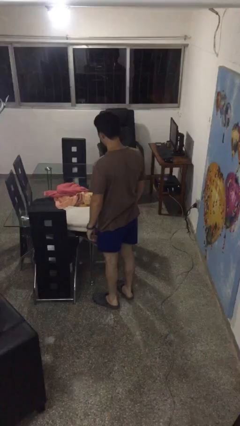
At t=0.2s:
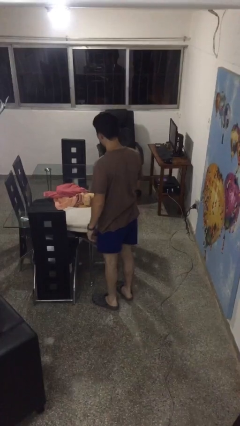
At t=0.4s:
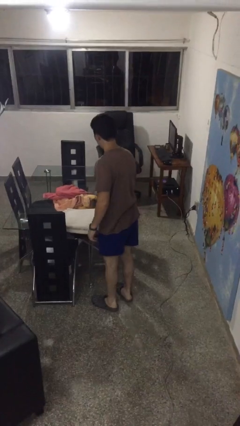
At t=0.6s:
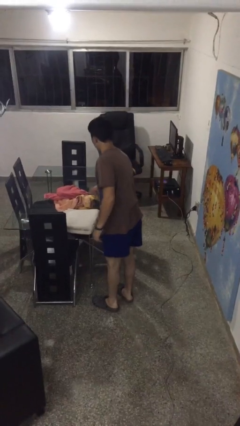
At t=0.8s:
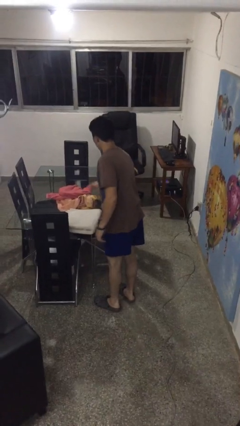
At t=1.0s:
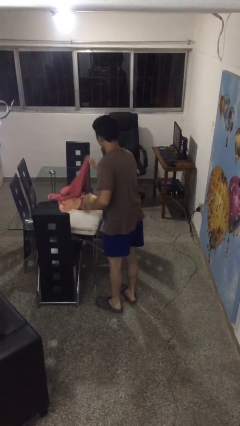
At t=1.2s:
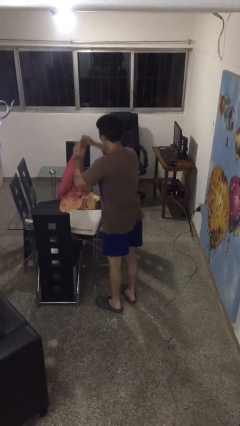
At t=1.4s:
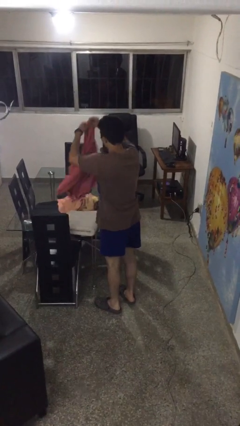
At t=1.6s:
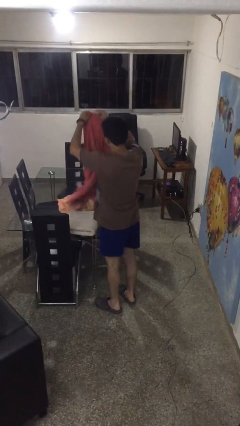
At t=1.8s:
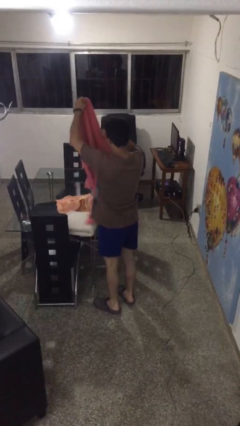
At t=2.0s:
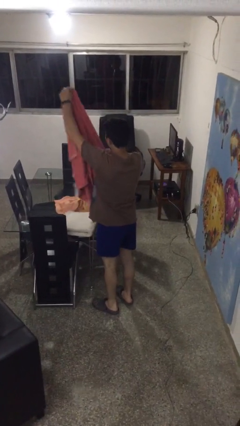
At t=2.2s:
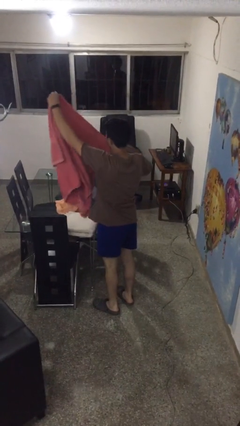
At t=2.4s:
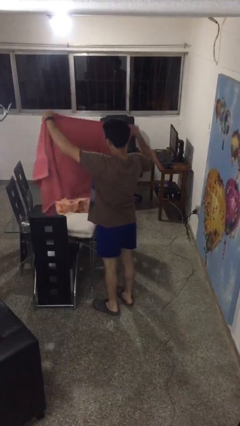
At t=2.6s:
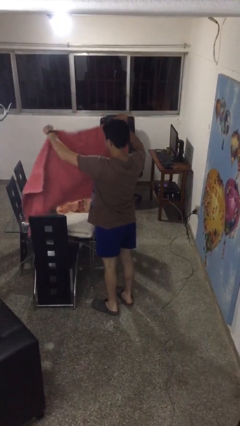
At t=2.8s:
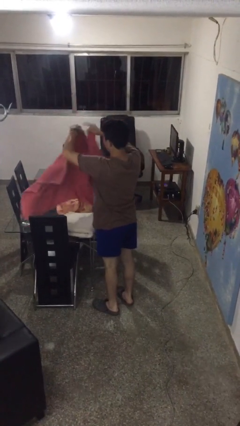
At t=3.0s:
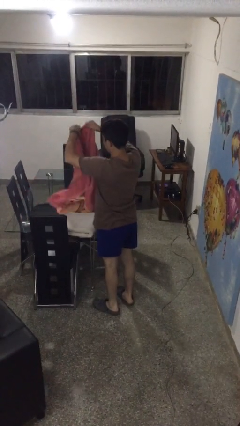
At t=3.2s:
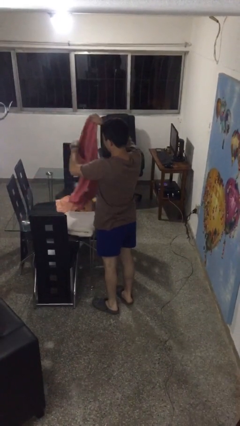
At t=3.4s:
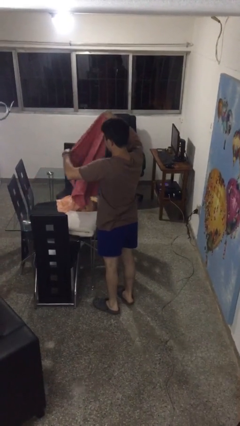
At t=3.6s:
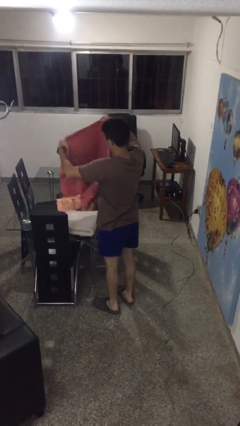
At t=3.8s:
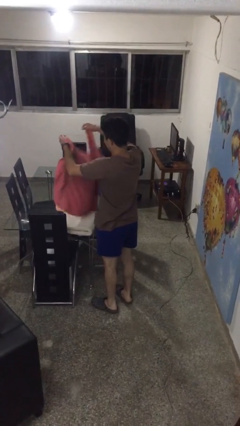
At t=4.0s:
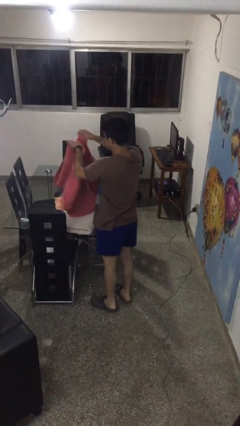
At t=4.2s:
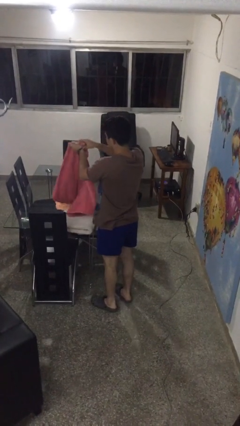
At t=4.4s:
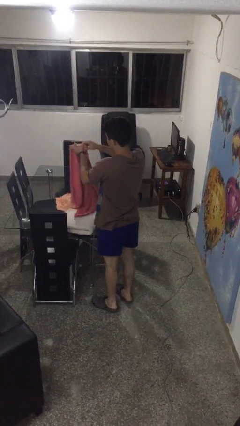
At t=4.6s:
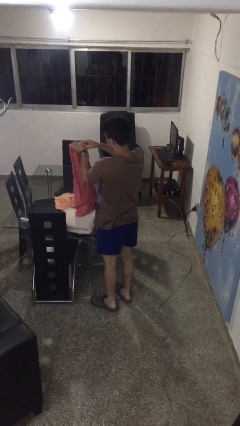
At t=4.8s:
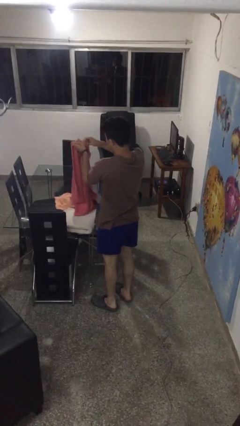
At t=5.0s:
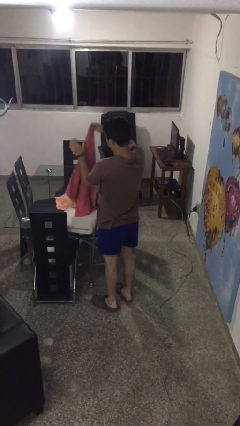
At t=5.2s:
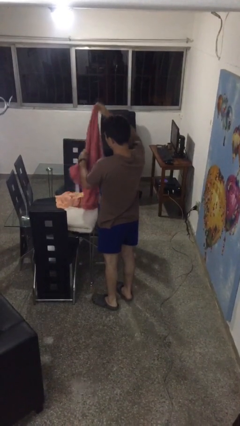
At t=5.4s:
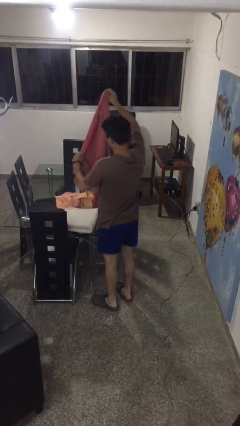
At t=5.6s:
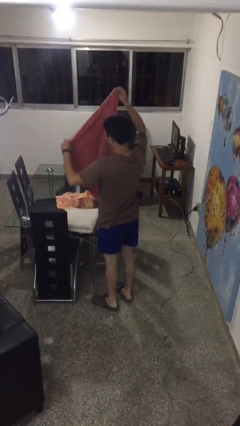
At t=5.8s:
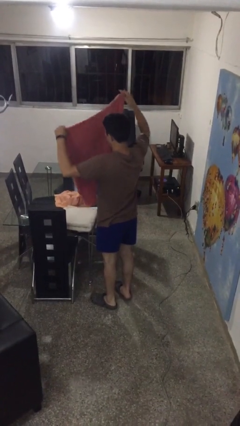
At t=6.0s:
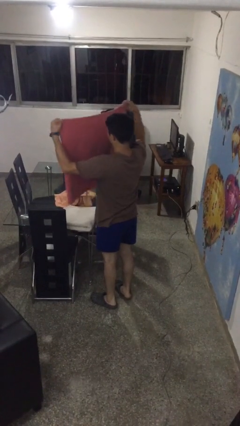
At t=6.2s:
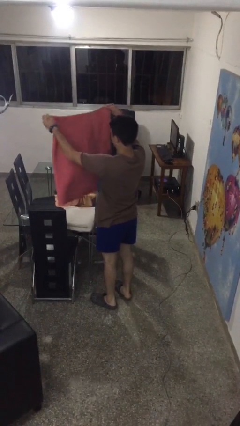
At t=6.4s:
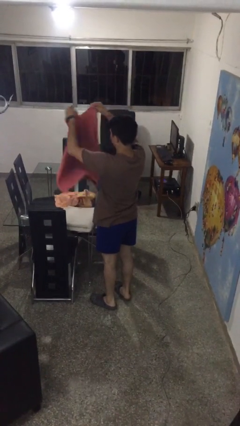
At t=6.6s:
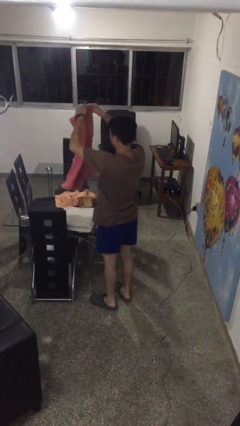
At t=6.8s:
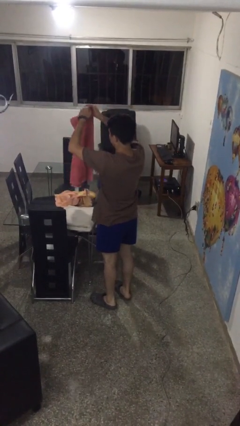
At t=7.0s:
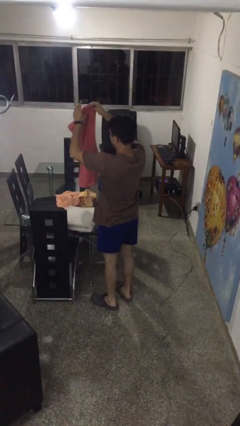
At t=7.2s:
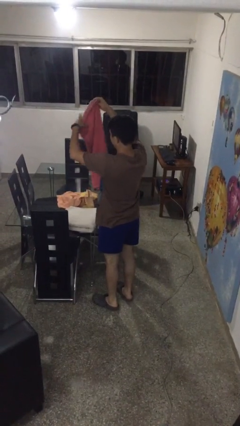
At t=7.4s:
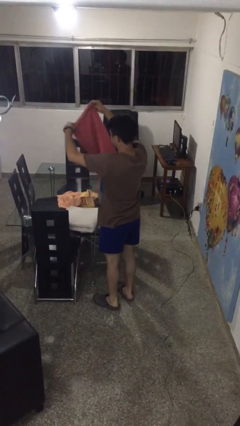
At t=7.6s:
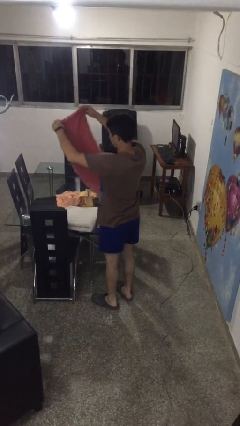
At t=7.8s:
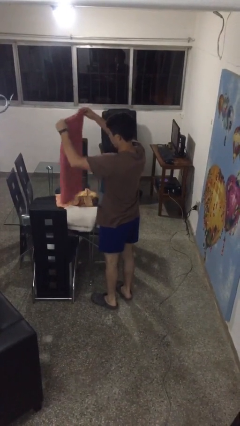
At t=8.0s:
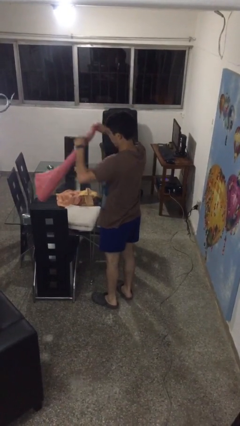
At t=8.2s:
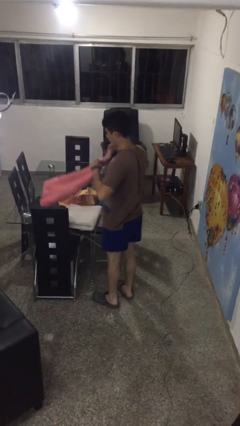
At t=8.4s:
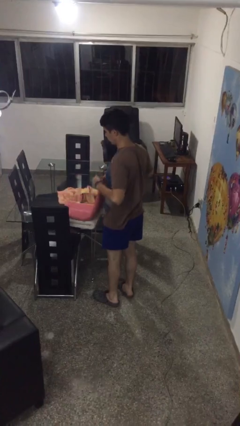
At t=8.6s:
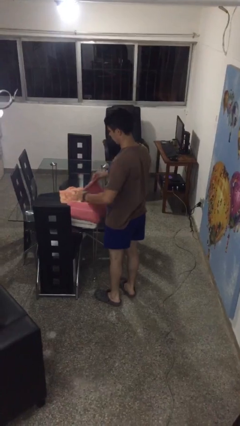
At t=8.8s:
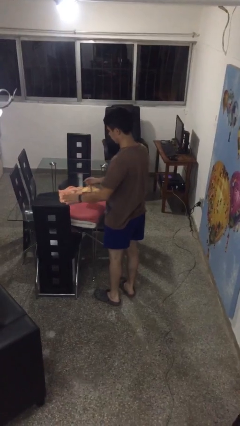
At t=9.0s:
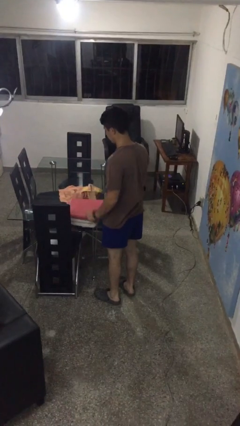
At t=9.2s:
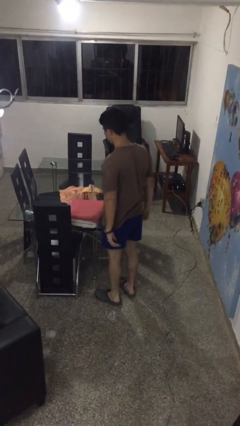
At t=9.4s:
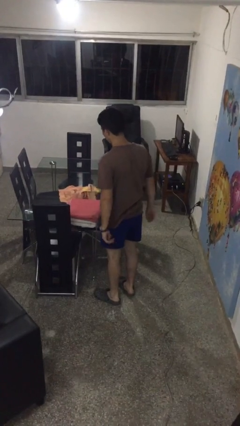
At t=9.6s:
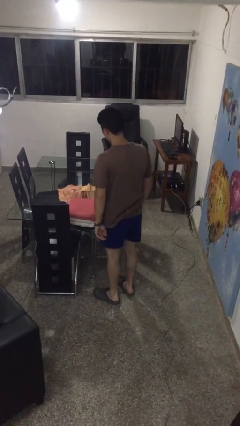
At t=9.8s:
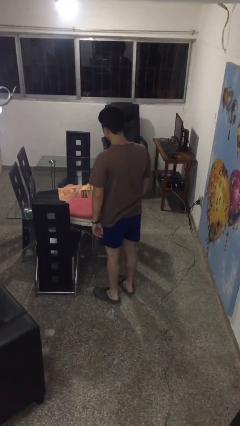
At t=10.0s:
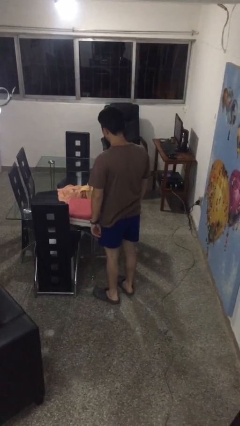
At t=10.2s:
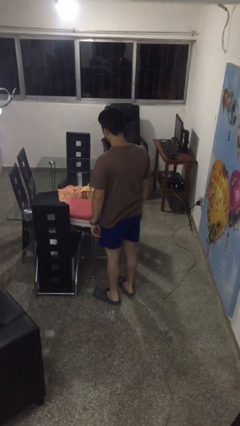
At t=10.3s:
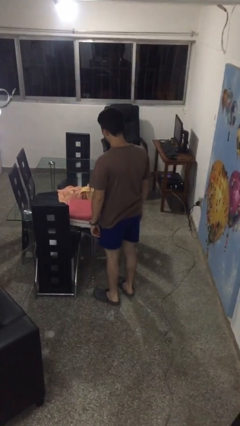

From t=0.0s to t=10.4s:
person folds towel

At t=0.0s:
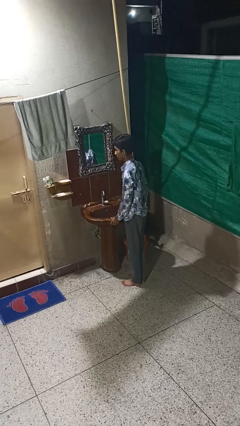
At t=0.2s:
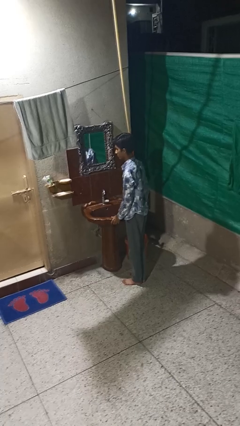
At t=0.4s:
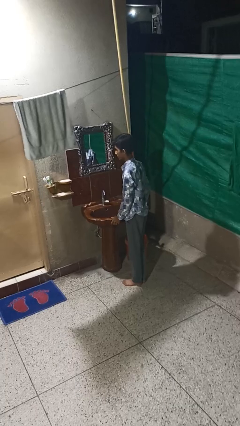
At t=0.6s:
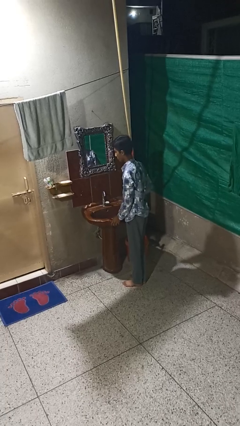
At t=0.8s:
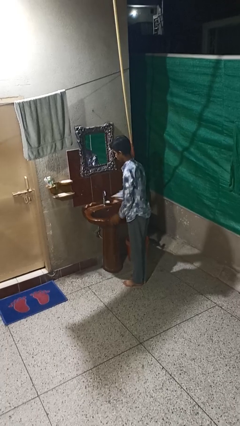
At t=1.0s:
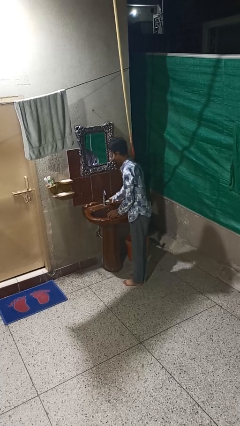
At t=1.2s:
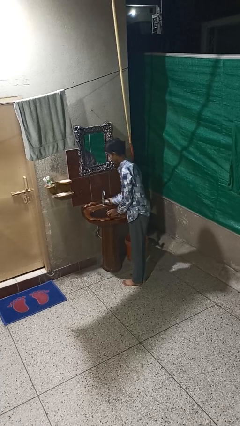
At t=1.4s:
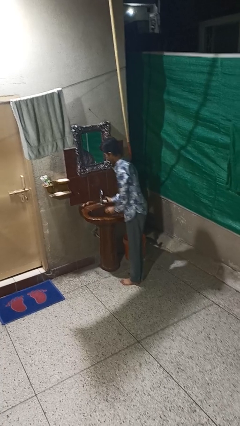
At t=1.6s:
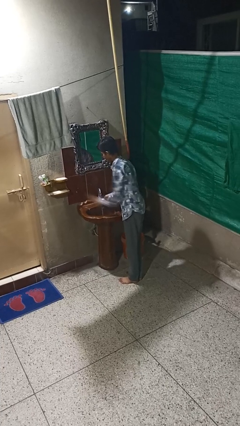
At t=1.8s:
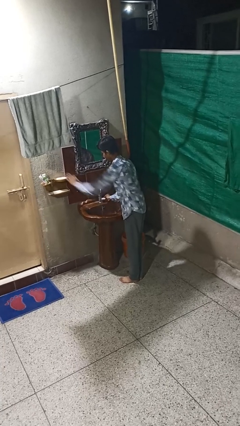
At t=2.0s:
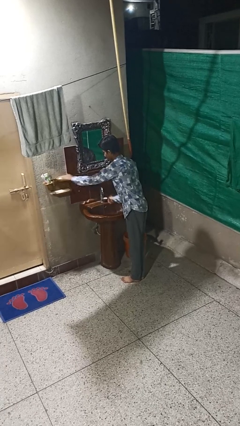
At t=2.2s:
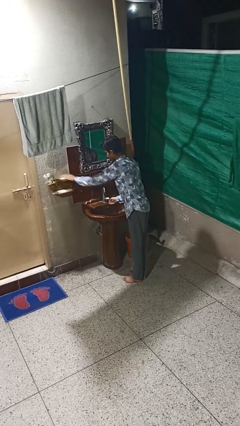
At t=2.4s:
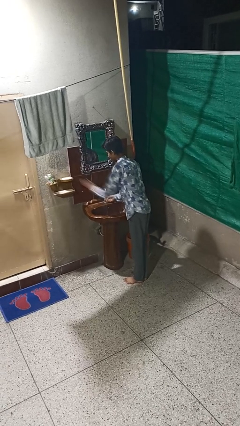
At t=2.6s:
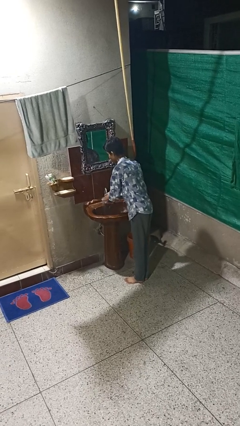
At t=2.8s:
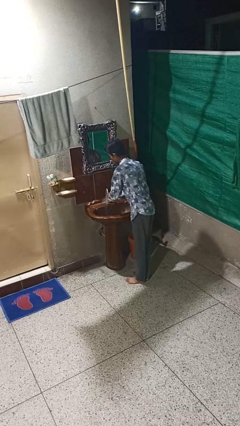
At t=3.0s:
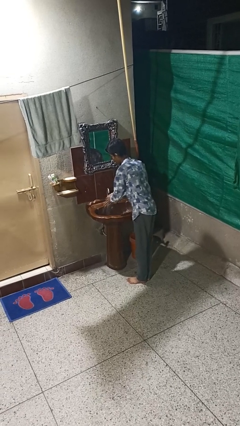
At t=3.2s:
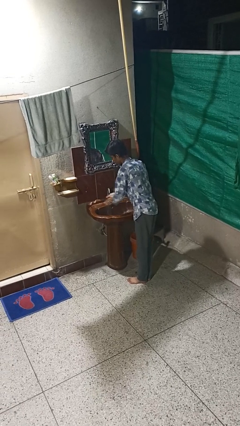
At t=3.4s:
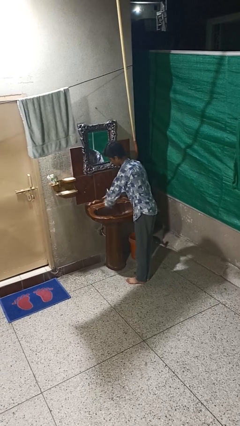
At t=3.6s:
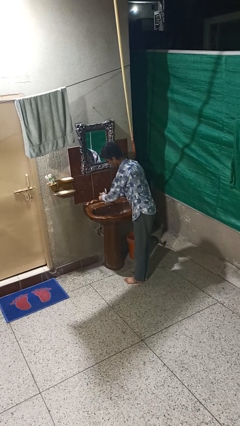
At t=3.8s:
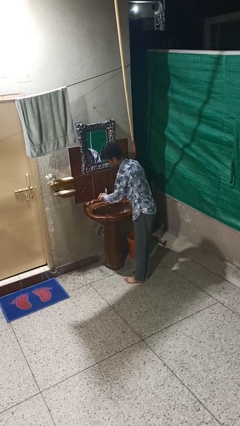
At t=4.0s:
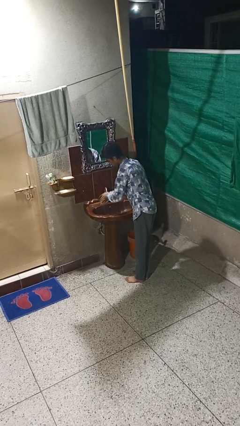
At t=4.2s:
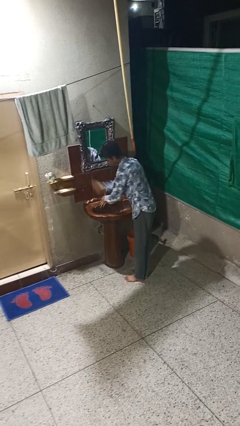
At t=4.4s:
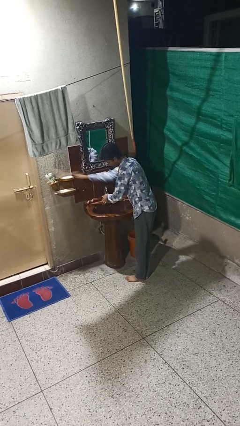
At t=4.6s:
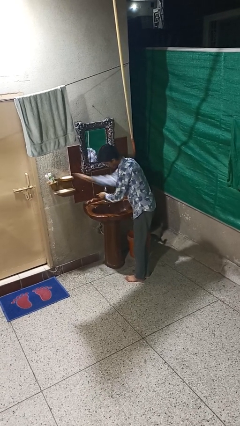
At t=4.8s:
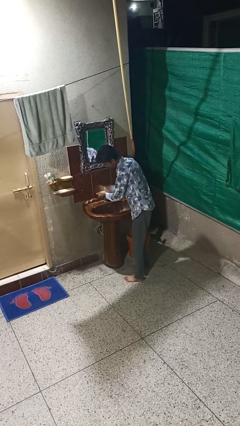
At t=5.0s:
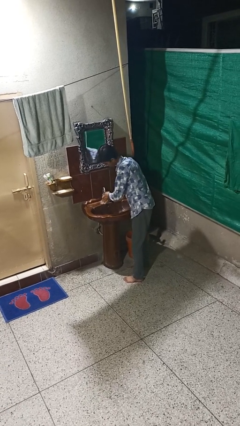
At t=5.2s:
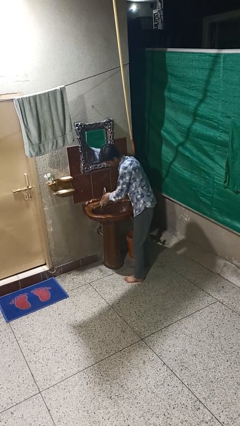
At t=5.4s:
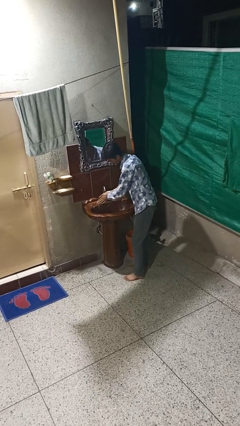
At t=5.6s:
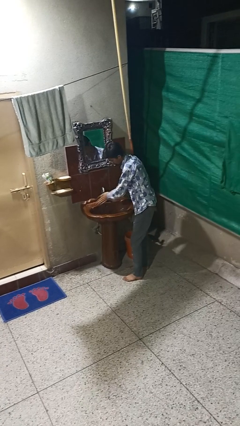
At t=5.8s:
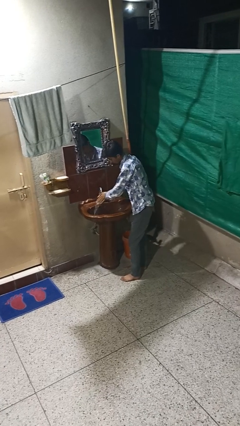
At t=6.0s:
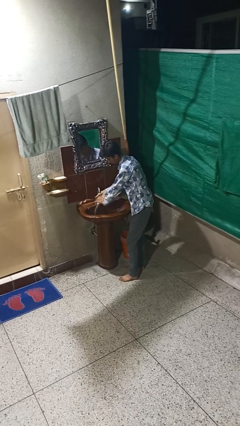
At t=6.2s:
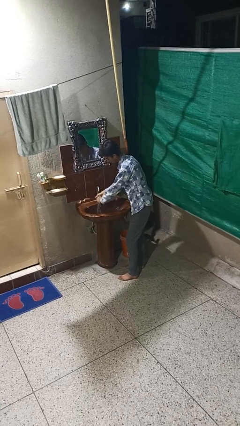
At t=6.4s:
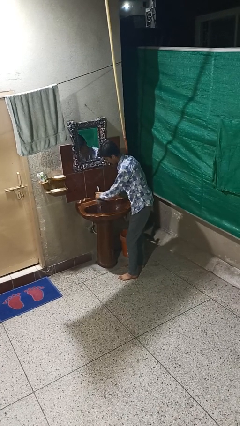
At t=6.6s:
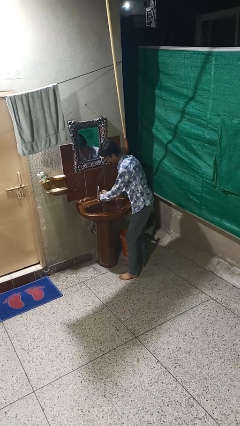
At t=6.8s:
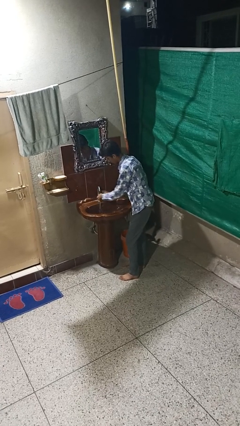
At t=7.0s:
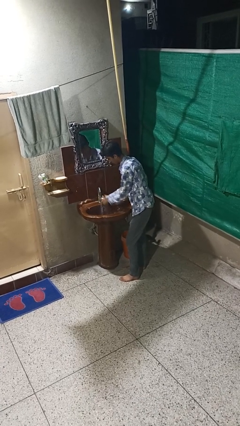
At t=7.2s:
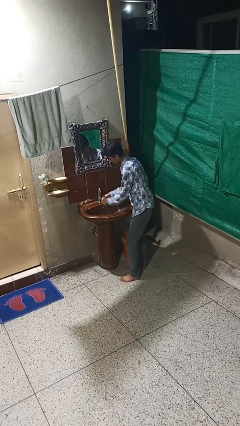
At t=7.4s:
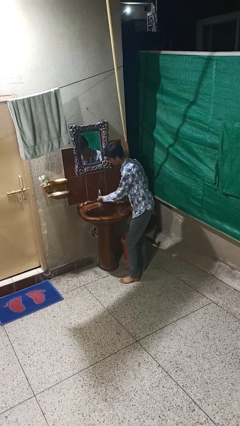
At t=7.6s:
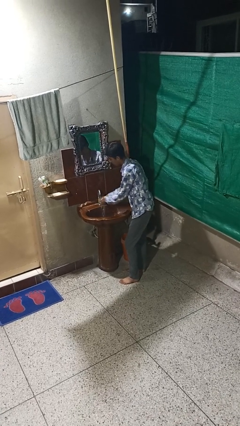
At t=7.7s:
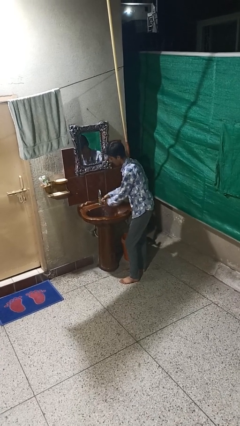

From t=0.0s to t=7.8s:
person washes hands

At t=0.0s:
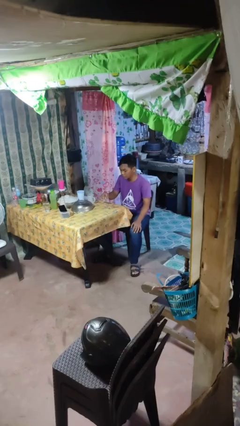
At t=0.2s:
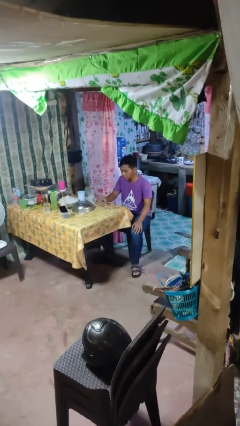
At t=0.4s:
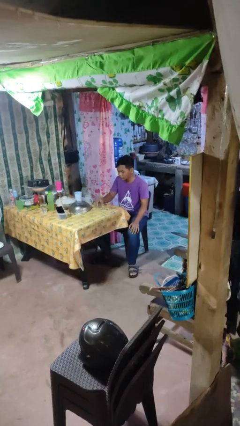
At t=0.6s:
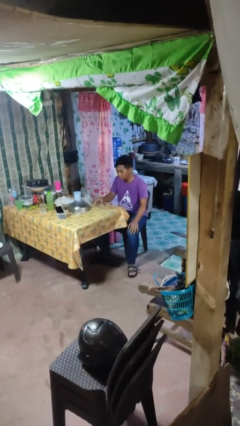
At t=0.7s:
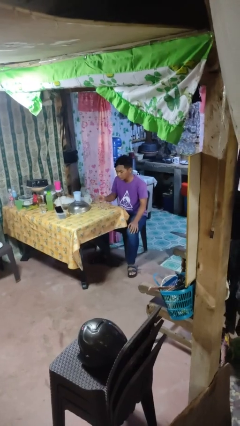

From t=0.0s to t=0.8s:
person puts down object on table
